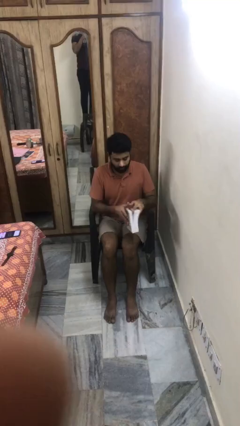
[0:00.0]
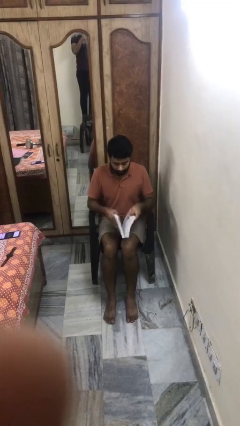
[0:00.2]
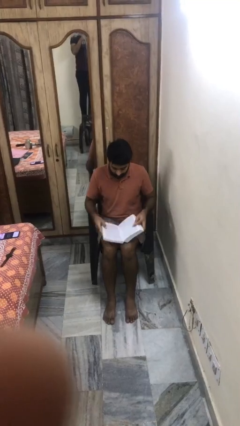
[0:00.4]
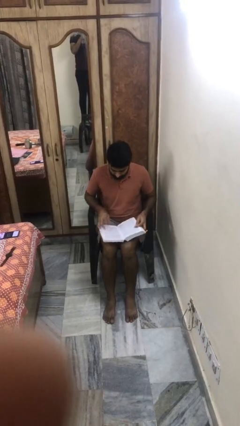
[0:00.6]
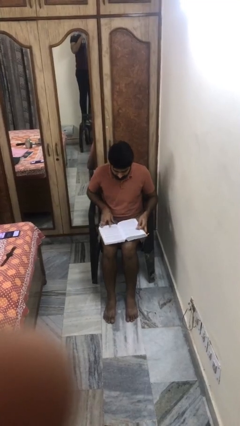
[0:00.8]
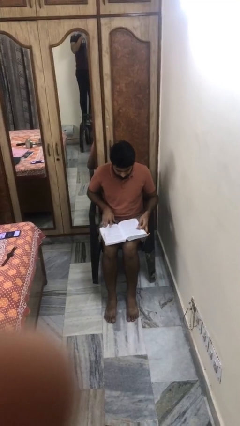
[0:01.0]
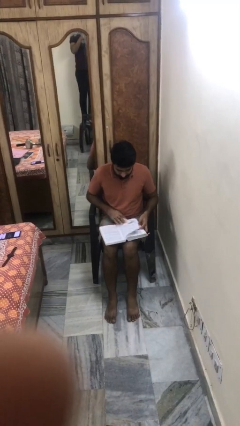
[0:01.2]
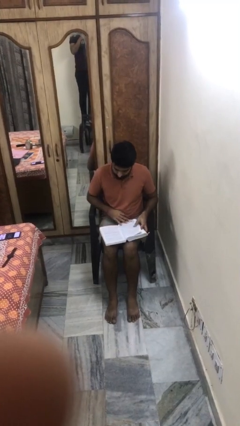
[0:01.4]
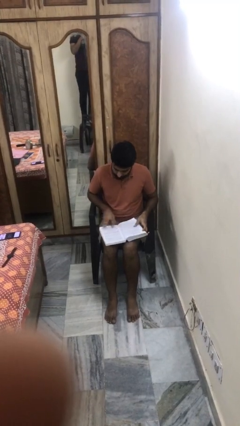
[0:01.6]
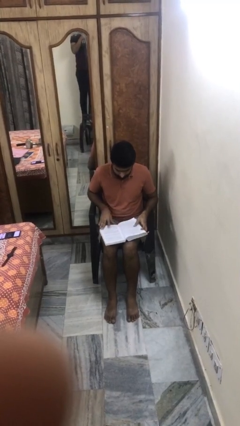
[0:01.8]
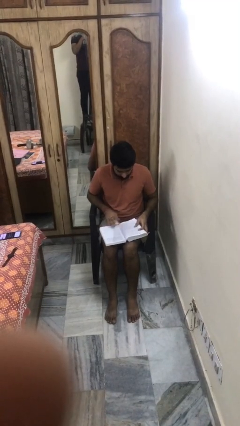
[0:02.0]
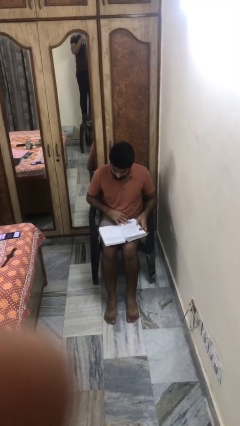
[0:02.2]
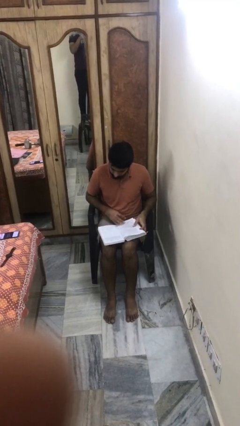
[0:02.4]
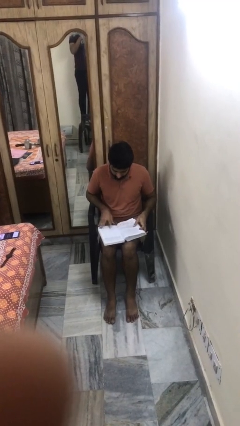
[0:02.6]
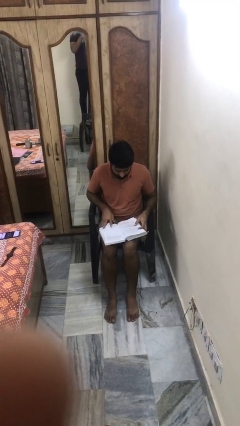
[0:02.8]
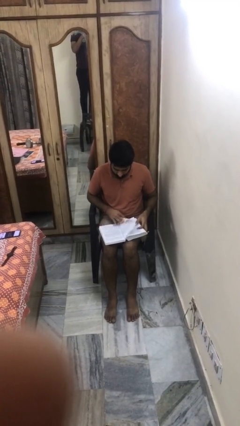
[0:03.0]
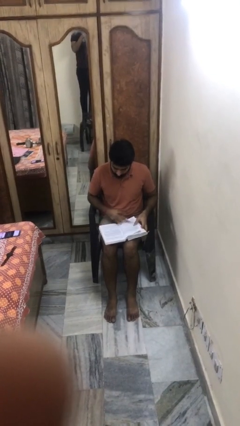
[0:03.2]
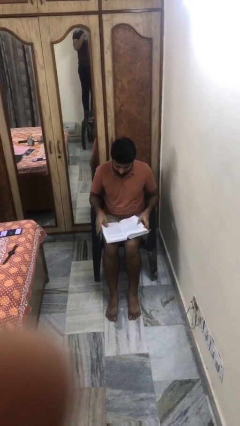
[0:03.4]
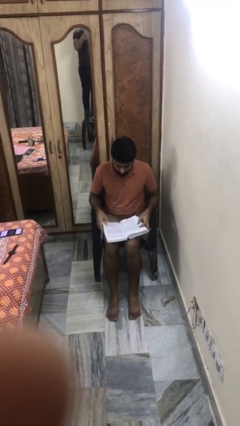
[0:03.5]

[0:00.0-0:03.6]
person reads book

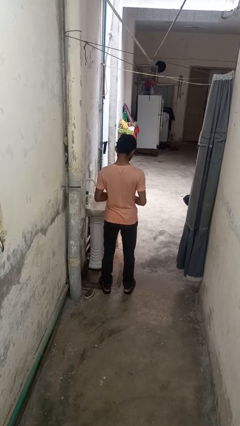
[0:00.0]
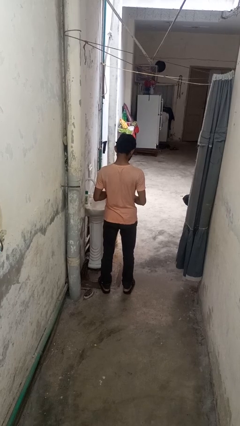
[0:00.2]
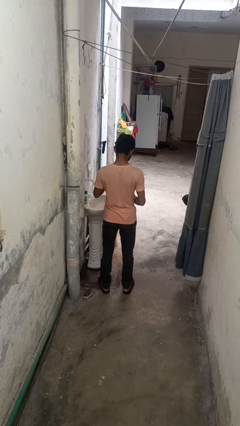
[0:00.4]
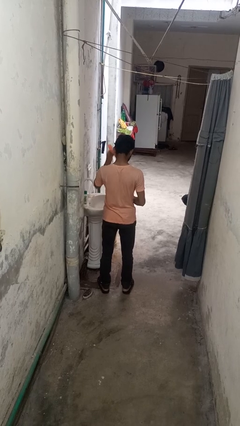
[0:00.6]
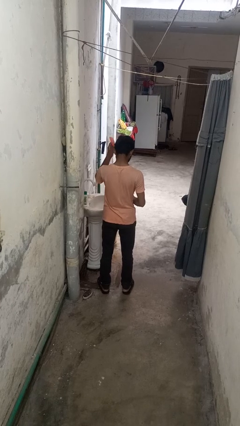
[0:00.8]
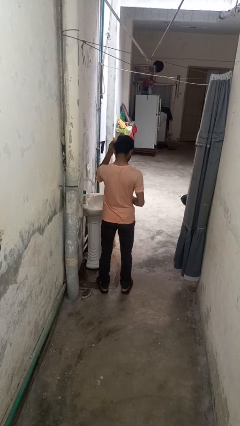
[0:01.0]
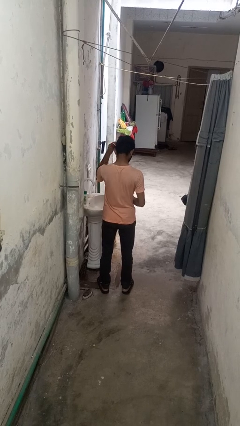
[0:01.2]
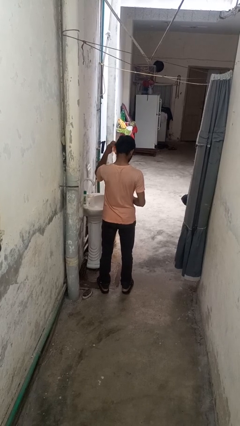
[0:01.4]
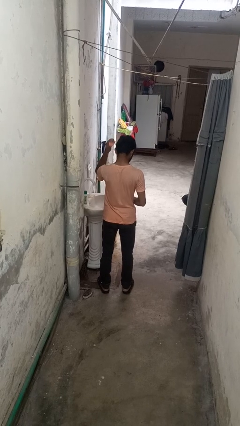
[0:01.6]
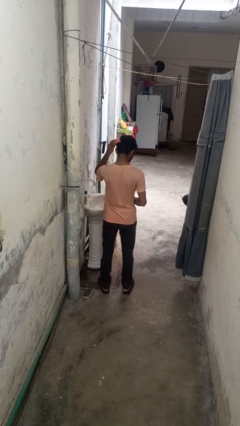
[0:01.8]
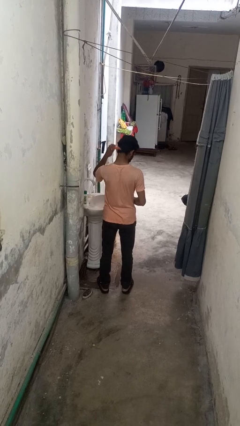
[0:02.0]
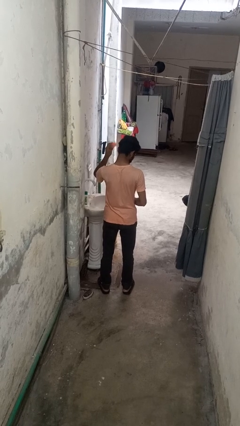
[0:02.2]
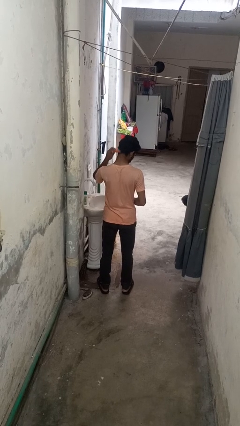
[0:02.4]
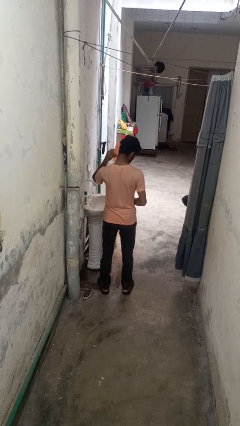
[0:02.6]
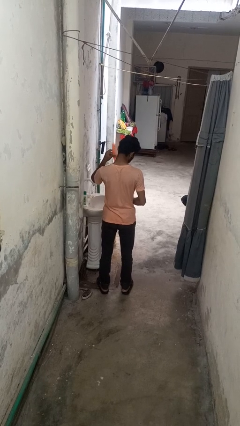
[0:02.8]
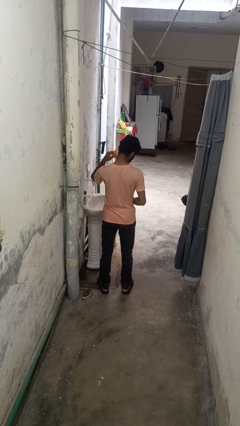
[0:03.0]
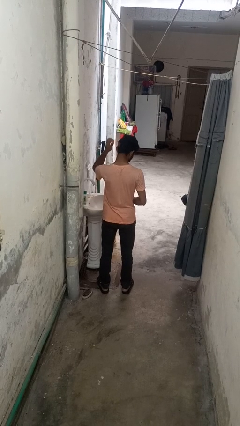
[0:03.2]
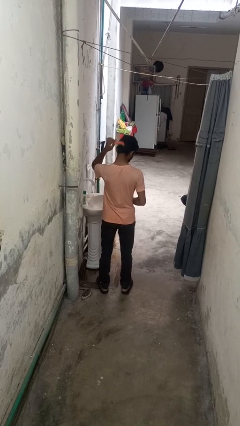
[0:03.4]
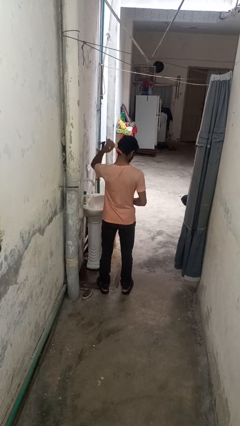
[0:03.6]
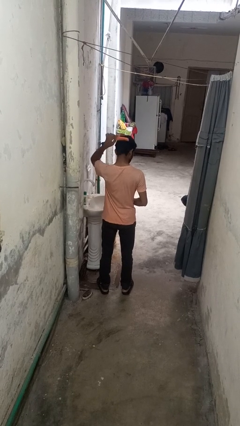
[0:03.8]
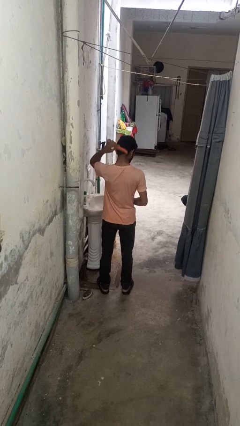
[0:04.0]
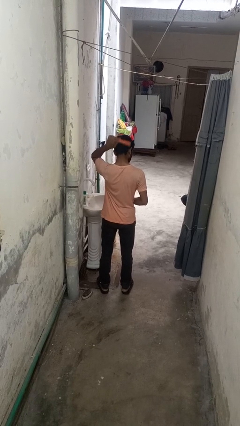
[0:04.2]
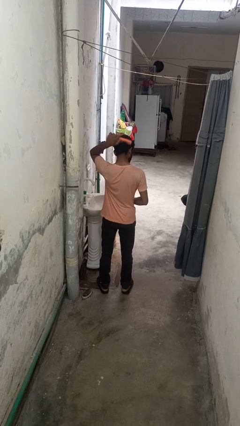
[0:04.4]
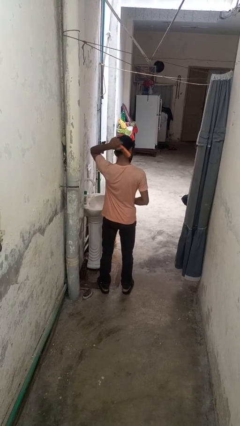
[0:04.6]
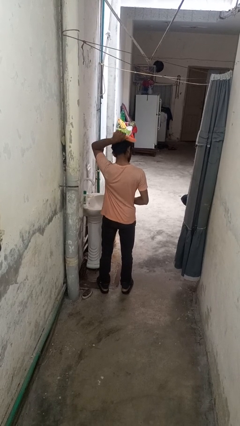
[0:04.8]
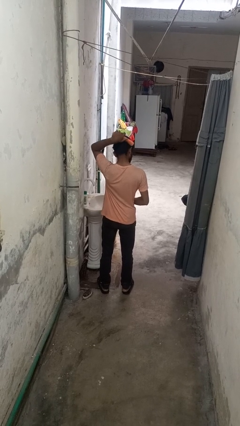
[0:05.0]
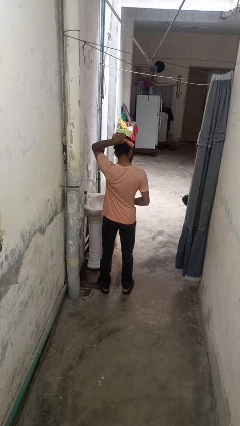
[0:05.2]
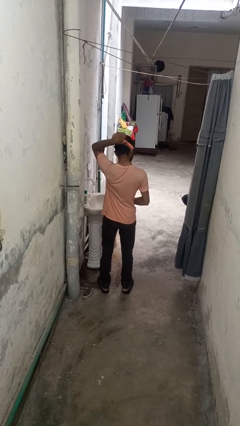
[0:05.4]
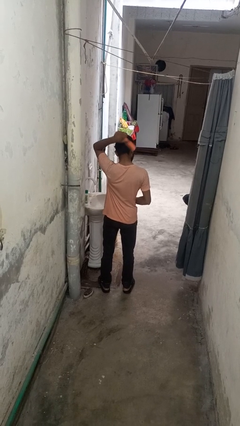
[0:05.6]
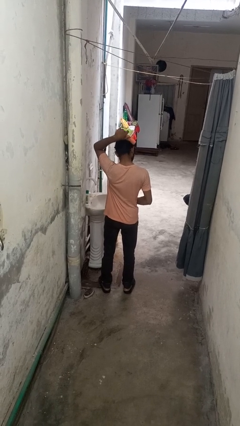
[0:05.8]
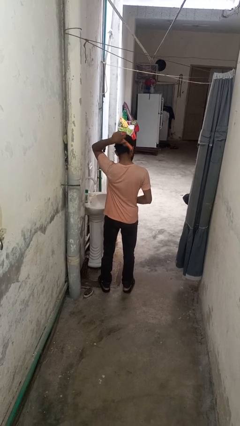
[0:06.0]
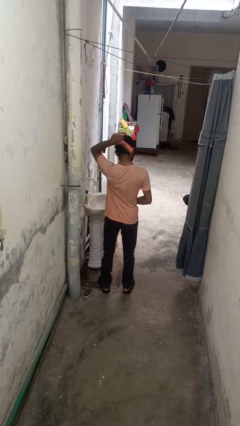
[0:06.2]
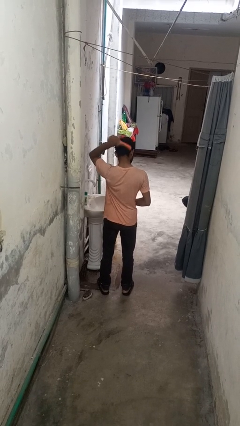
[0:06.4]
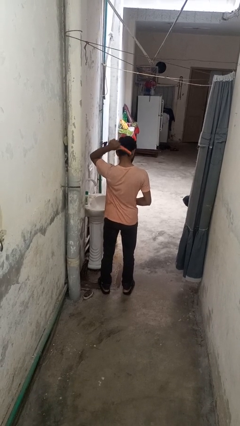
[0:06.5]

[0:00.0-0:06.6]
person brushes hair

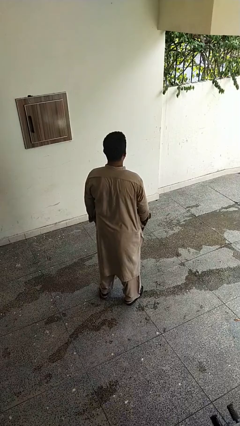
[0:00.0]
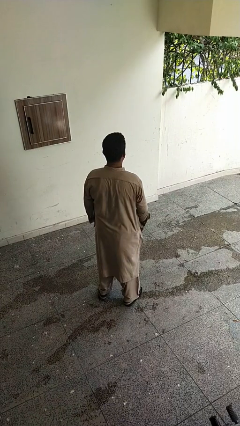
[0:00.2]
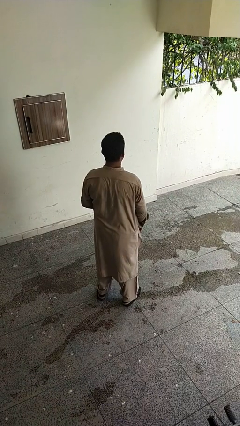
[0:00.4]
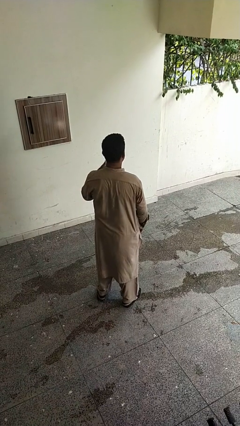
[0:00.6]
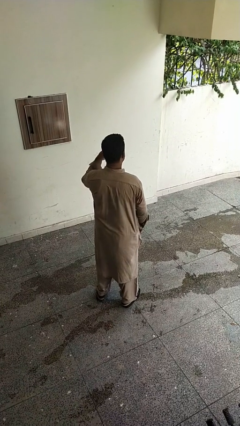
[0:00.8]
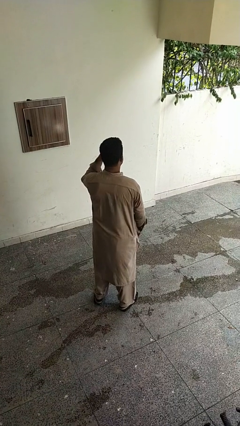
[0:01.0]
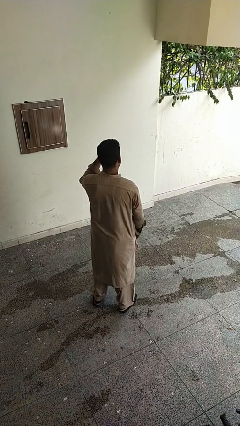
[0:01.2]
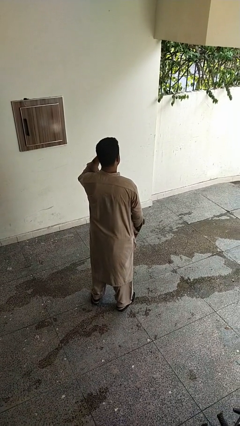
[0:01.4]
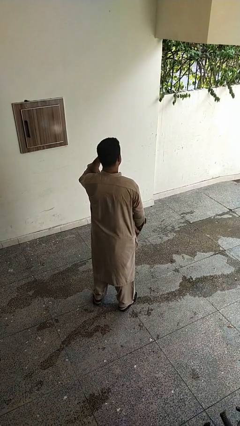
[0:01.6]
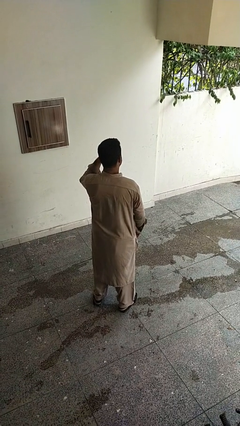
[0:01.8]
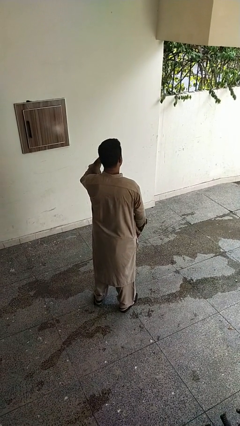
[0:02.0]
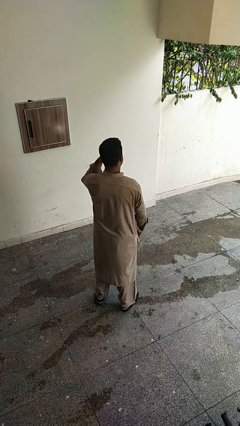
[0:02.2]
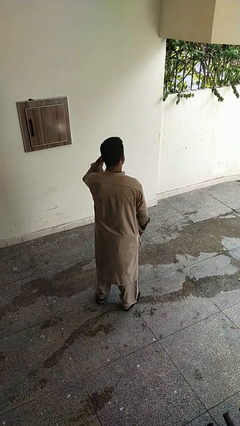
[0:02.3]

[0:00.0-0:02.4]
person gestures call me

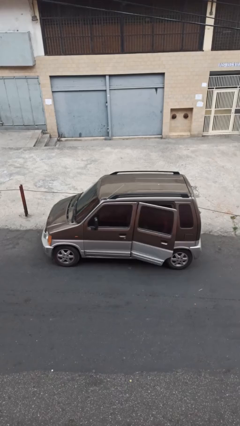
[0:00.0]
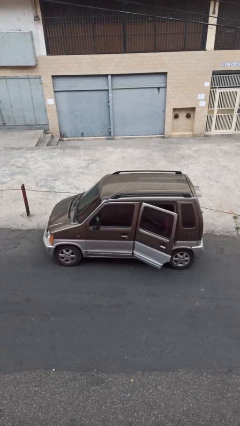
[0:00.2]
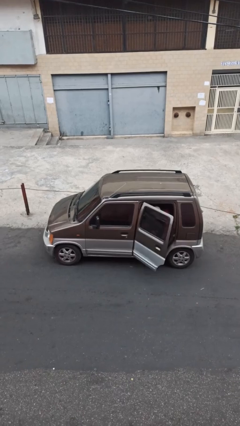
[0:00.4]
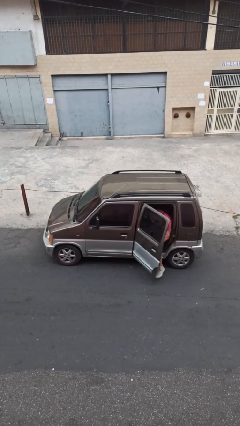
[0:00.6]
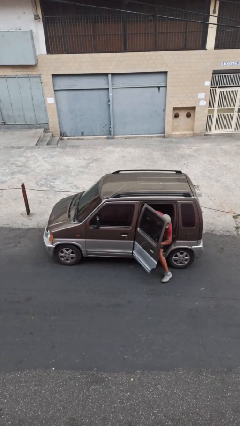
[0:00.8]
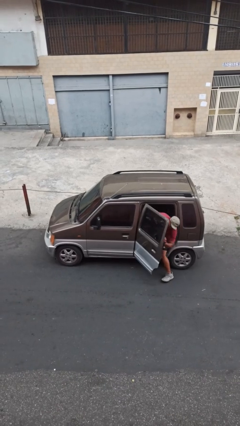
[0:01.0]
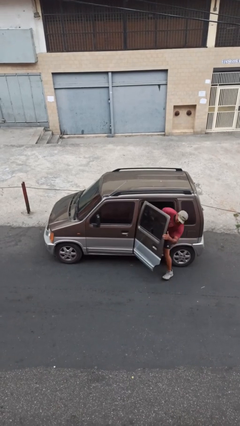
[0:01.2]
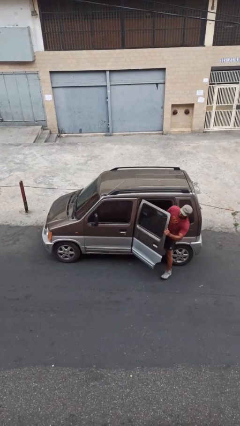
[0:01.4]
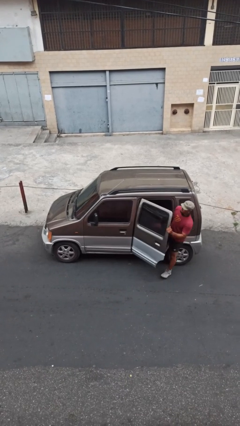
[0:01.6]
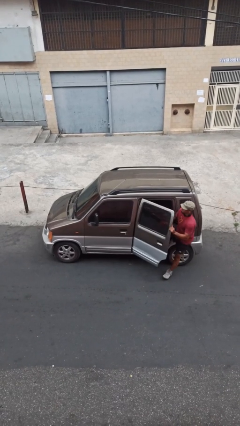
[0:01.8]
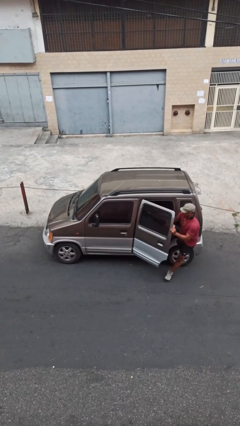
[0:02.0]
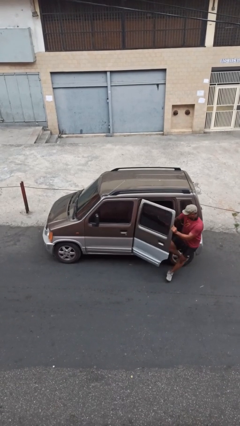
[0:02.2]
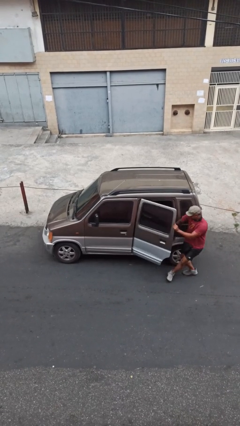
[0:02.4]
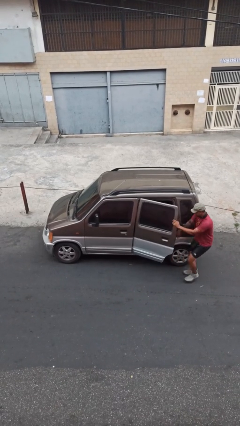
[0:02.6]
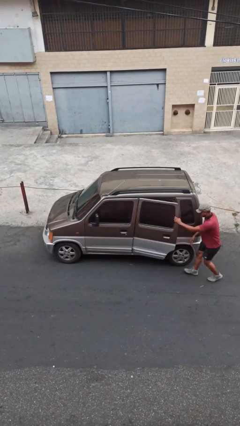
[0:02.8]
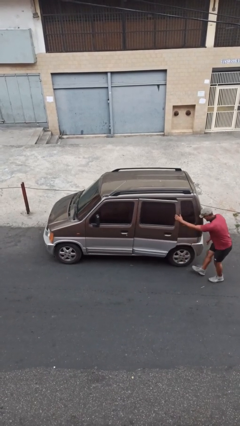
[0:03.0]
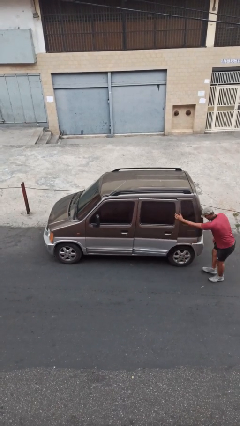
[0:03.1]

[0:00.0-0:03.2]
car drops off person

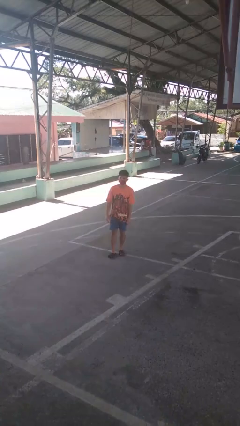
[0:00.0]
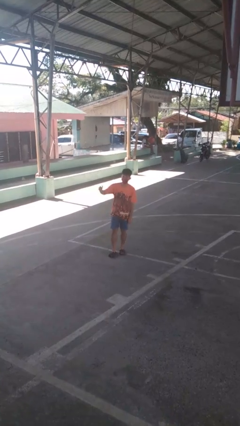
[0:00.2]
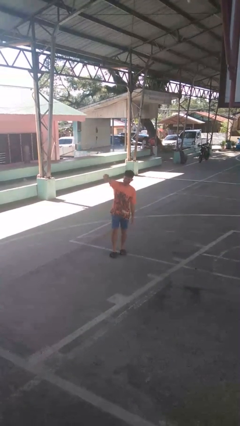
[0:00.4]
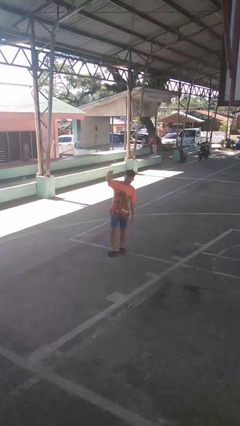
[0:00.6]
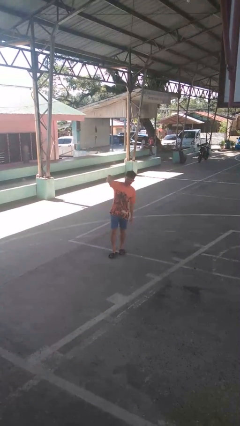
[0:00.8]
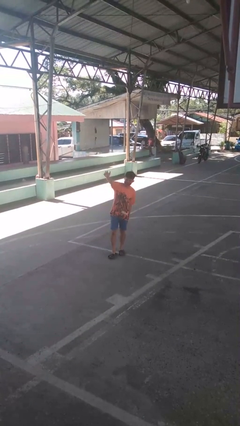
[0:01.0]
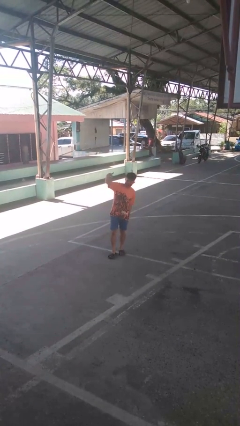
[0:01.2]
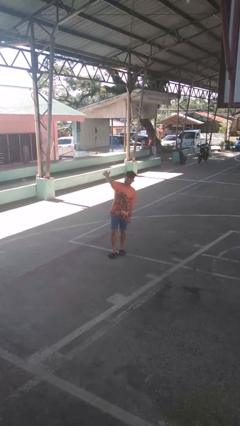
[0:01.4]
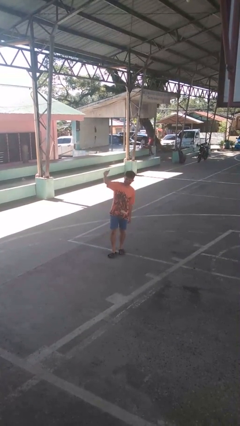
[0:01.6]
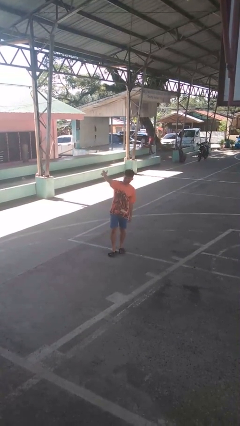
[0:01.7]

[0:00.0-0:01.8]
person gestures come here
